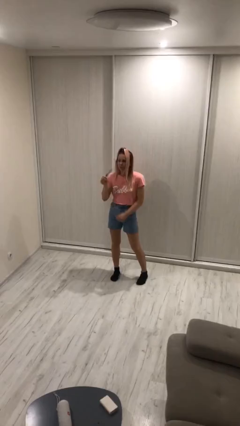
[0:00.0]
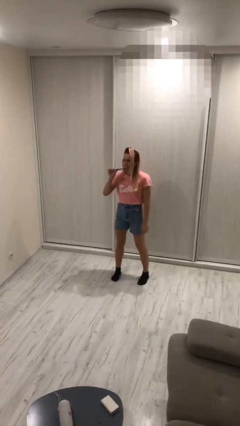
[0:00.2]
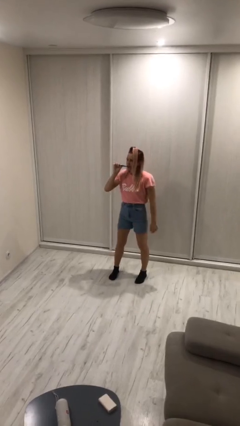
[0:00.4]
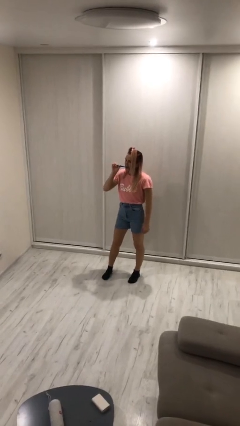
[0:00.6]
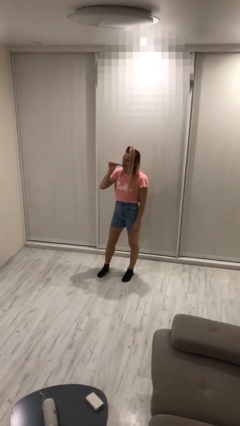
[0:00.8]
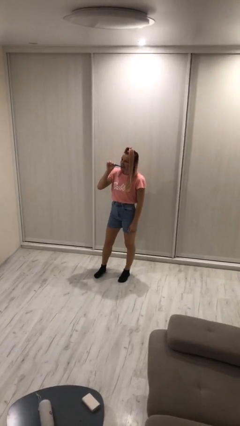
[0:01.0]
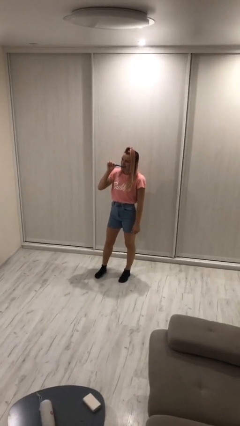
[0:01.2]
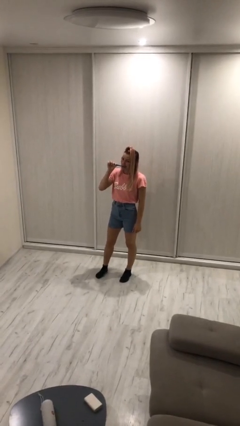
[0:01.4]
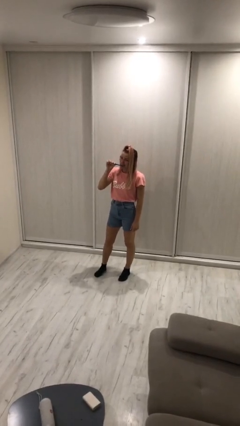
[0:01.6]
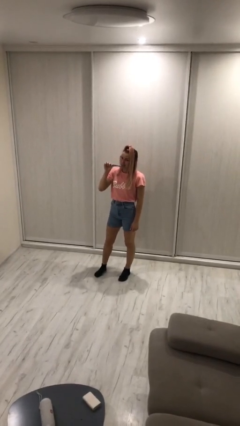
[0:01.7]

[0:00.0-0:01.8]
person brushes teeth

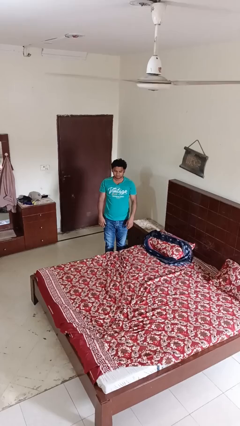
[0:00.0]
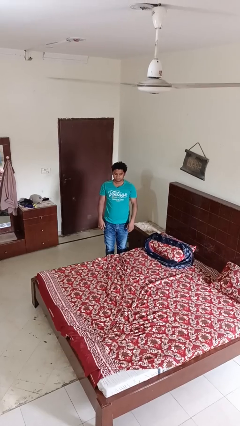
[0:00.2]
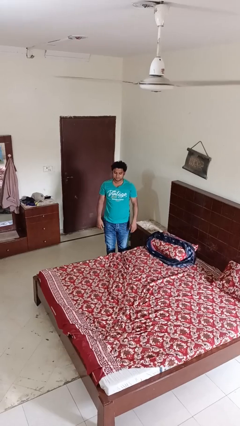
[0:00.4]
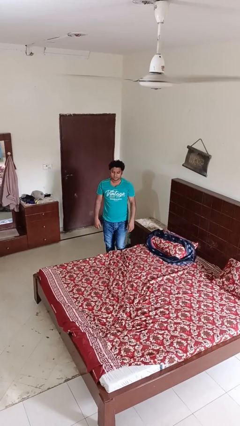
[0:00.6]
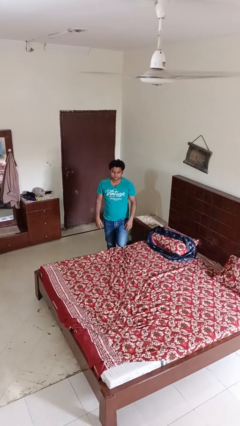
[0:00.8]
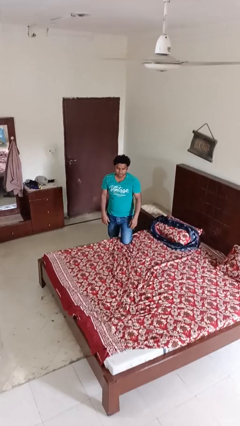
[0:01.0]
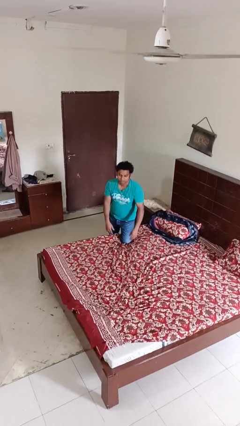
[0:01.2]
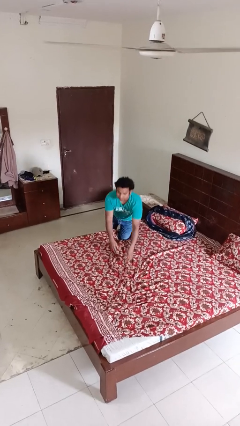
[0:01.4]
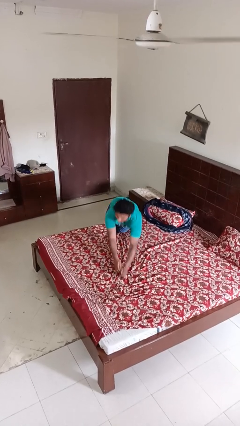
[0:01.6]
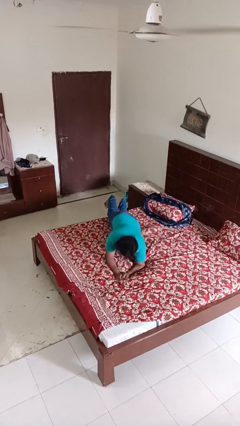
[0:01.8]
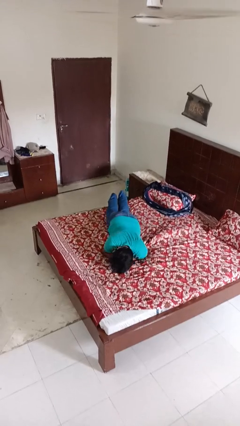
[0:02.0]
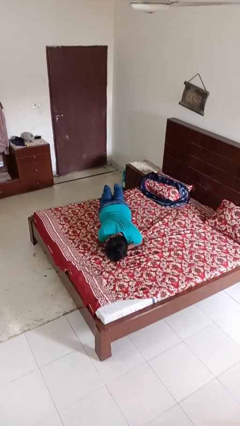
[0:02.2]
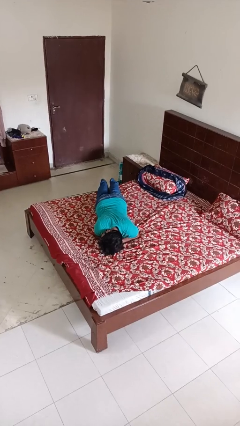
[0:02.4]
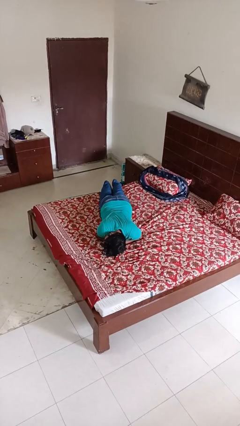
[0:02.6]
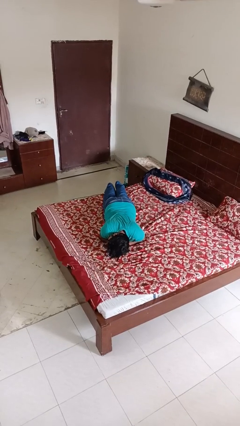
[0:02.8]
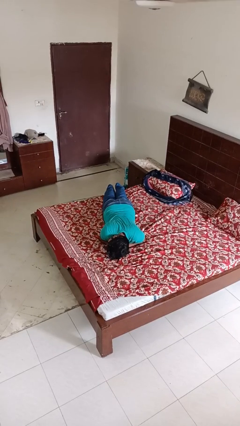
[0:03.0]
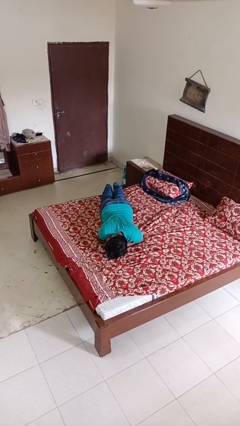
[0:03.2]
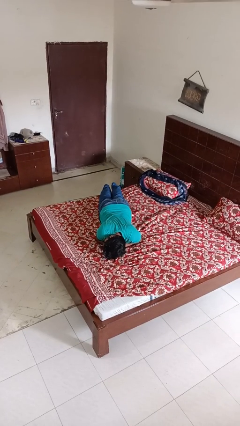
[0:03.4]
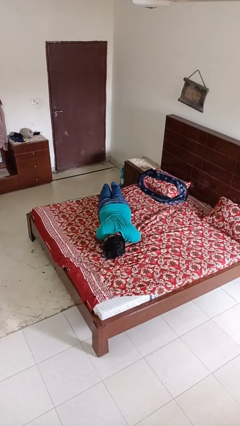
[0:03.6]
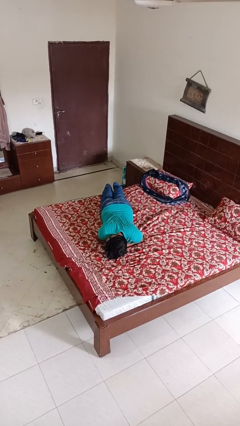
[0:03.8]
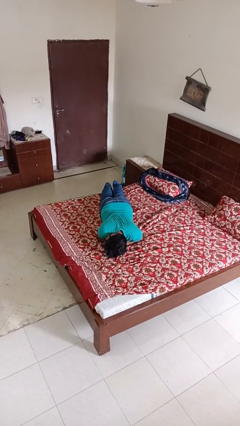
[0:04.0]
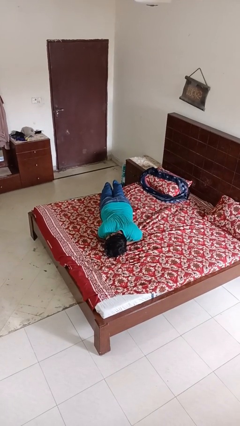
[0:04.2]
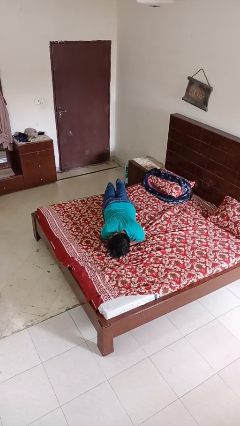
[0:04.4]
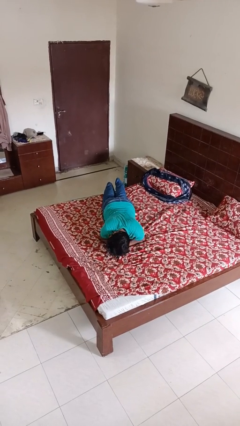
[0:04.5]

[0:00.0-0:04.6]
person lies down on bed

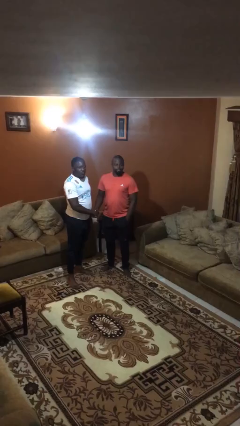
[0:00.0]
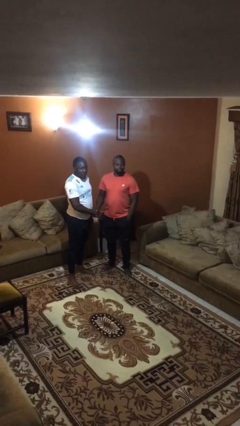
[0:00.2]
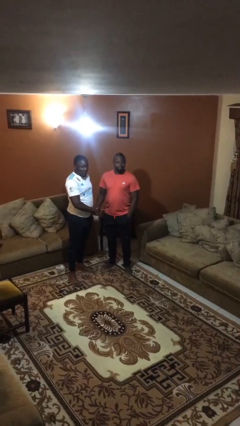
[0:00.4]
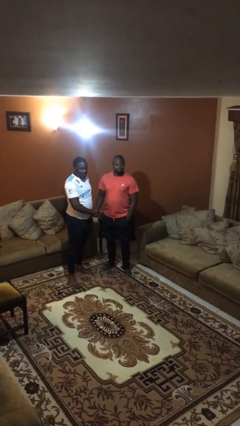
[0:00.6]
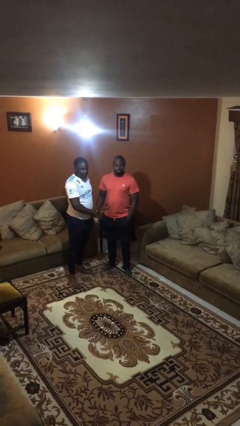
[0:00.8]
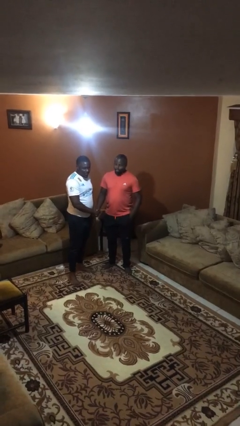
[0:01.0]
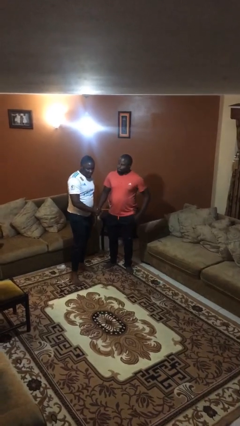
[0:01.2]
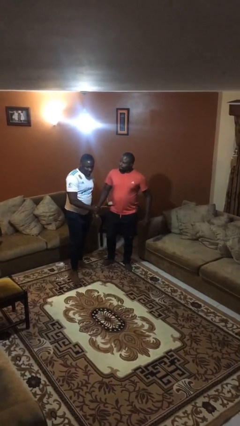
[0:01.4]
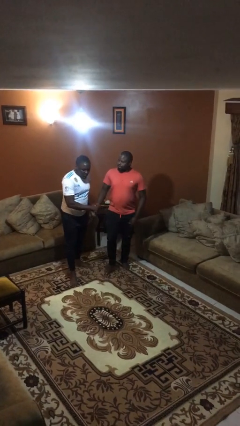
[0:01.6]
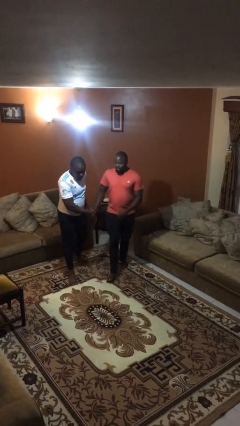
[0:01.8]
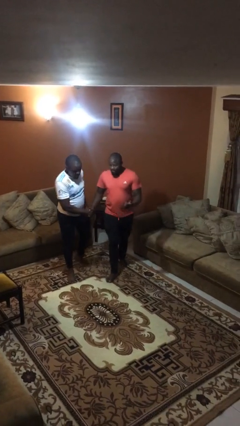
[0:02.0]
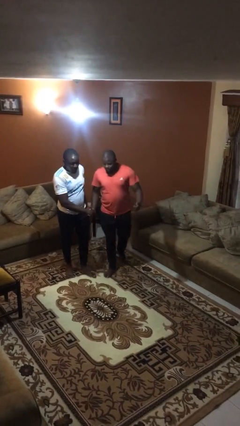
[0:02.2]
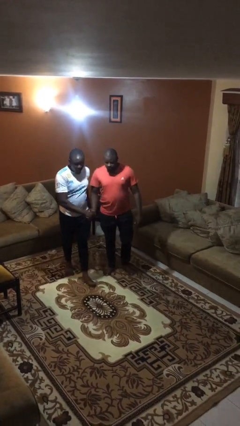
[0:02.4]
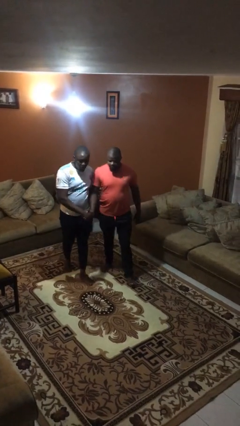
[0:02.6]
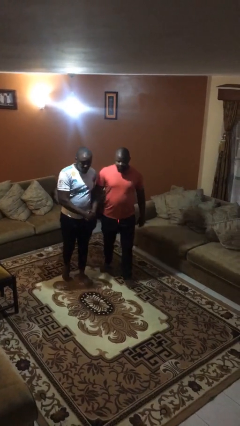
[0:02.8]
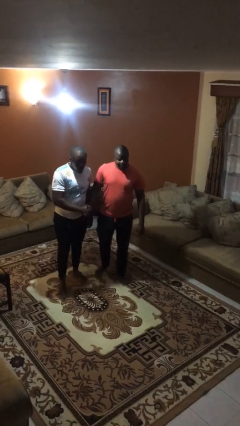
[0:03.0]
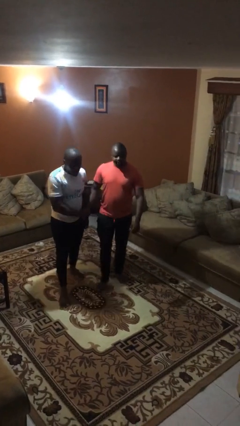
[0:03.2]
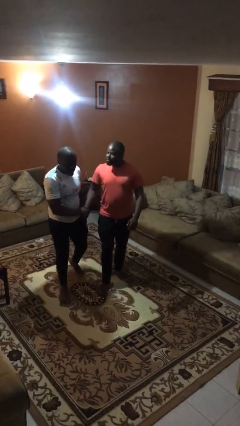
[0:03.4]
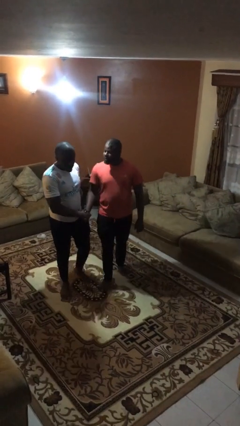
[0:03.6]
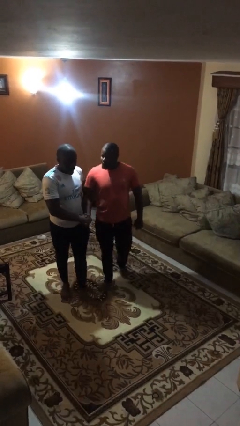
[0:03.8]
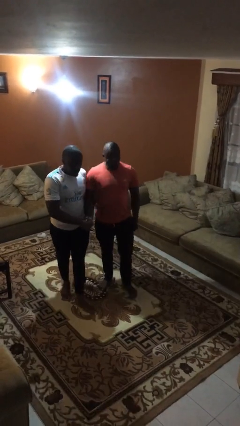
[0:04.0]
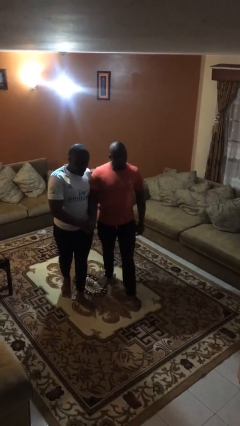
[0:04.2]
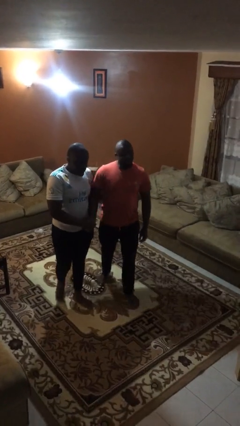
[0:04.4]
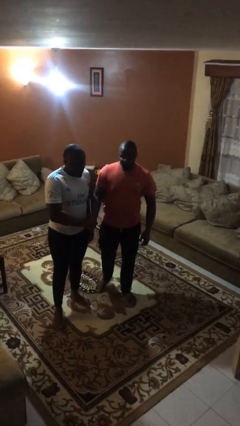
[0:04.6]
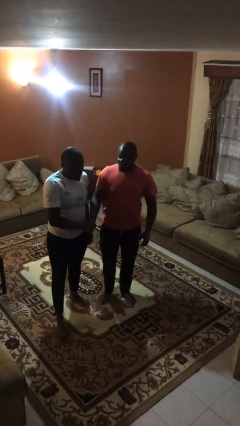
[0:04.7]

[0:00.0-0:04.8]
person holds hand

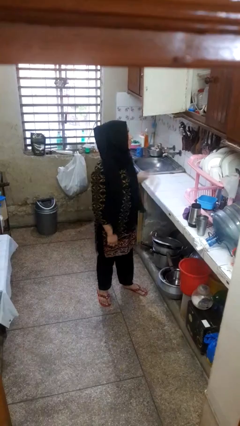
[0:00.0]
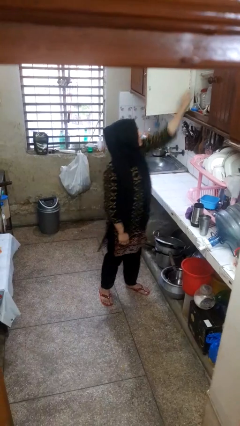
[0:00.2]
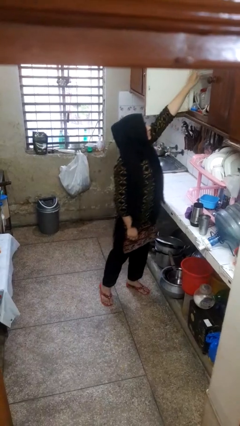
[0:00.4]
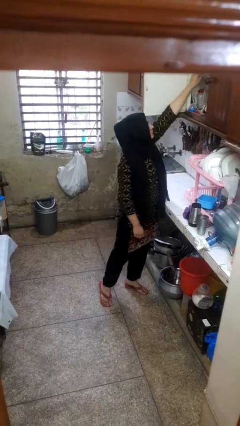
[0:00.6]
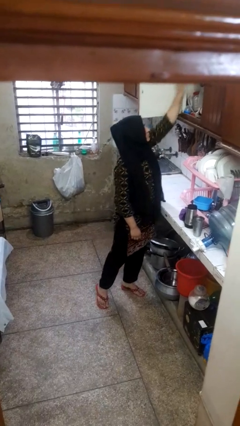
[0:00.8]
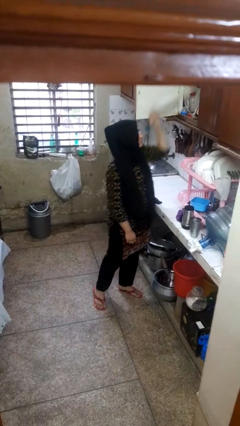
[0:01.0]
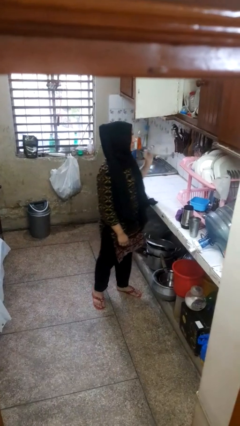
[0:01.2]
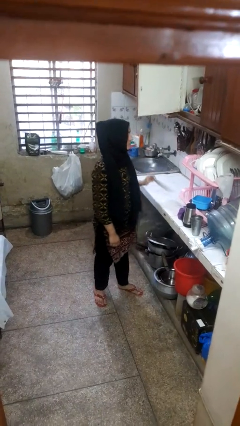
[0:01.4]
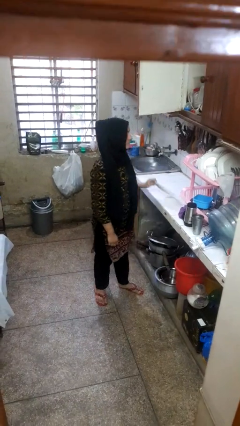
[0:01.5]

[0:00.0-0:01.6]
person takes object from cabinet

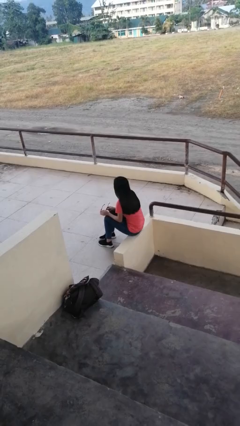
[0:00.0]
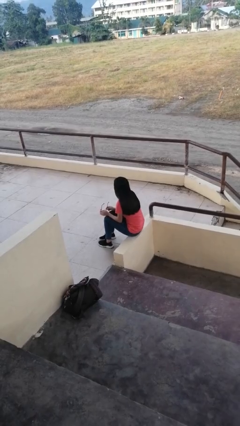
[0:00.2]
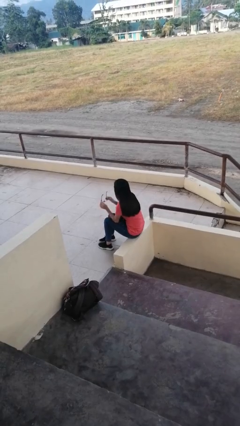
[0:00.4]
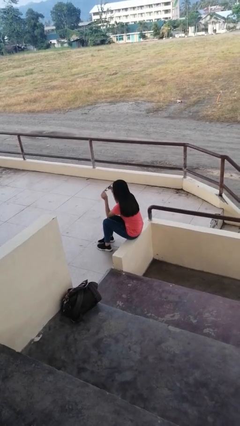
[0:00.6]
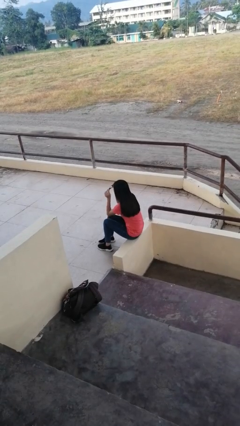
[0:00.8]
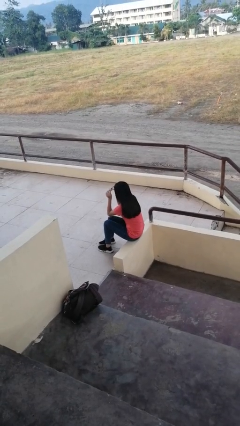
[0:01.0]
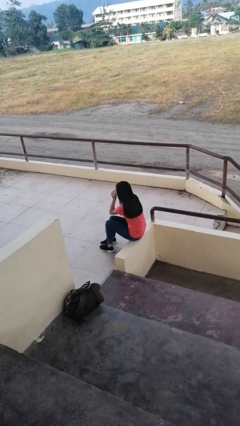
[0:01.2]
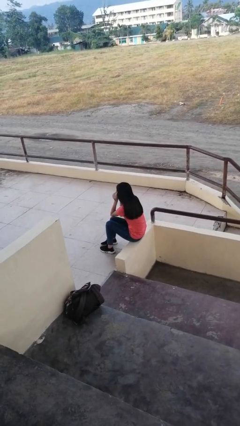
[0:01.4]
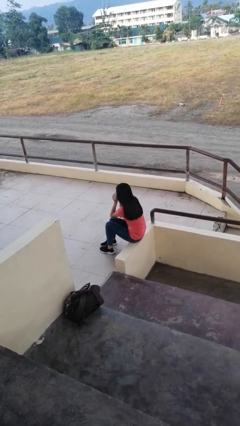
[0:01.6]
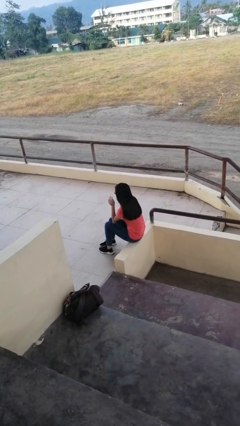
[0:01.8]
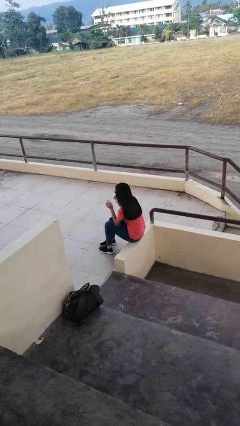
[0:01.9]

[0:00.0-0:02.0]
person puts on glasses

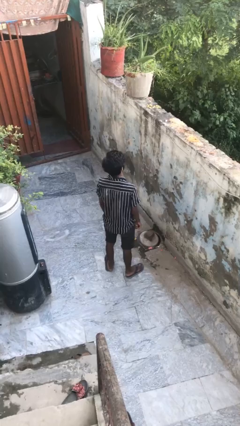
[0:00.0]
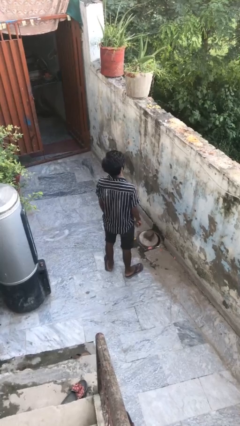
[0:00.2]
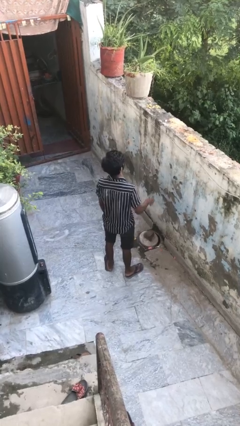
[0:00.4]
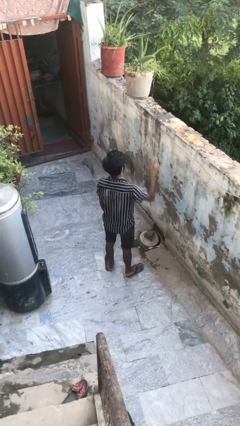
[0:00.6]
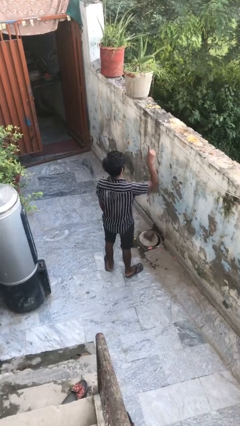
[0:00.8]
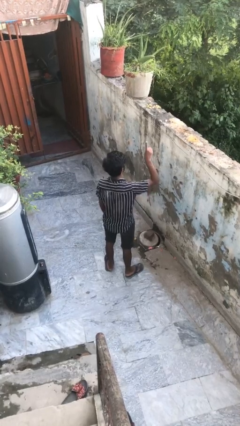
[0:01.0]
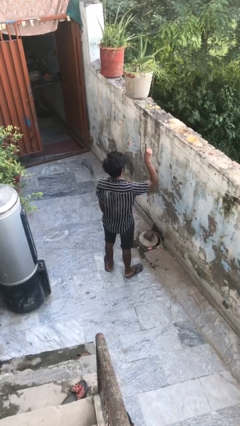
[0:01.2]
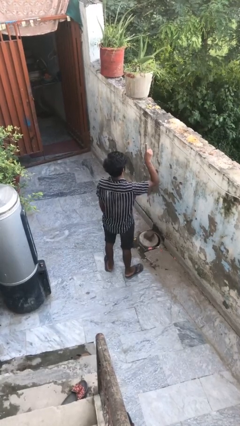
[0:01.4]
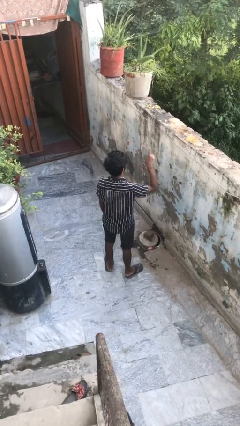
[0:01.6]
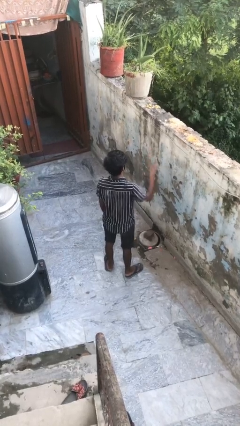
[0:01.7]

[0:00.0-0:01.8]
person gestures number one

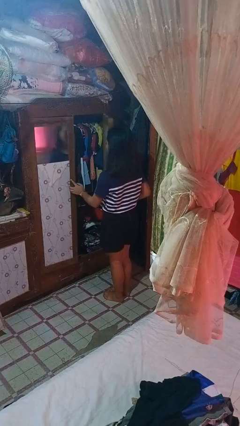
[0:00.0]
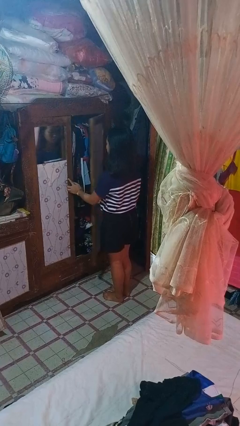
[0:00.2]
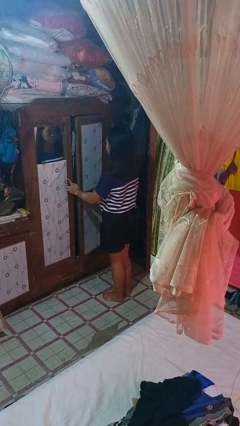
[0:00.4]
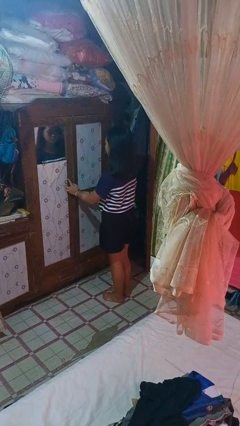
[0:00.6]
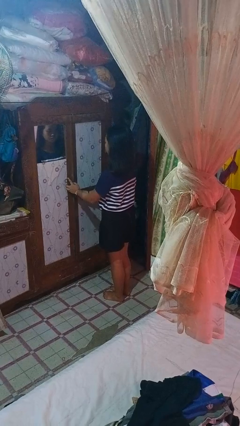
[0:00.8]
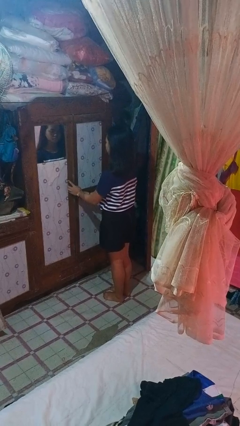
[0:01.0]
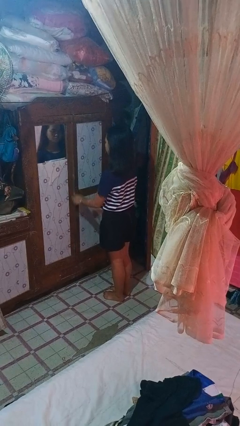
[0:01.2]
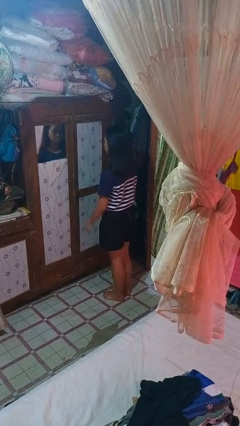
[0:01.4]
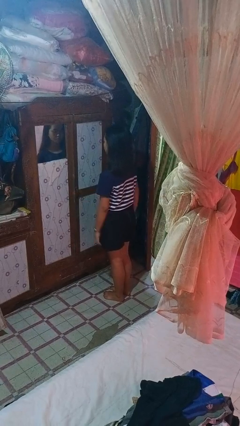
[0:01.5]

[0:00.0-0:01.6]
person closes closet door
